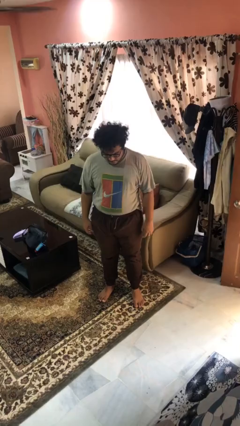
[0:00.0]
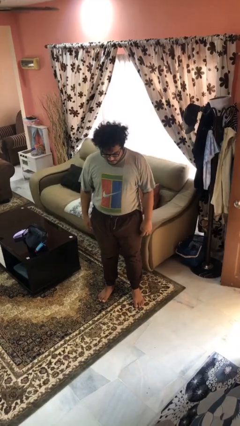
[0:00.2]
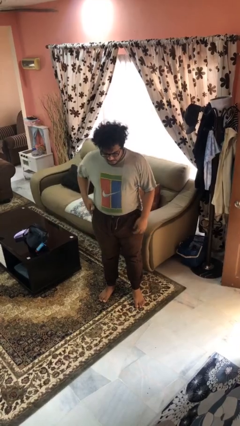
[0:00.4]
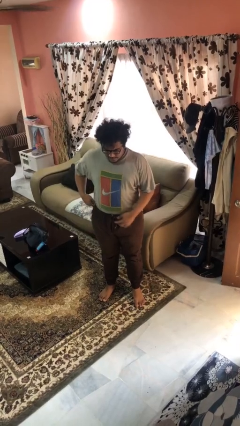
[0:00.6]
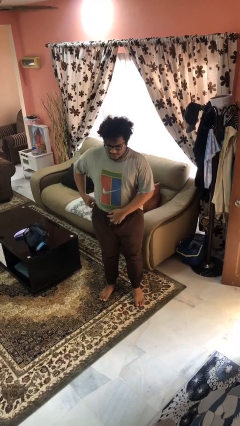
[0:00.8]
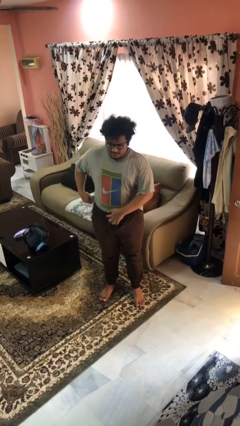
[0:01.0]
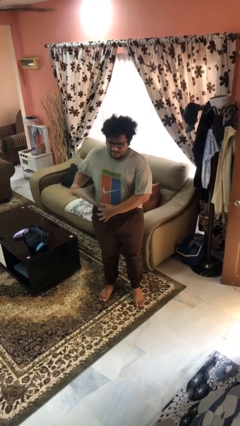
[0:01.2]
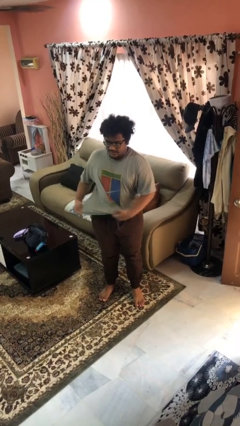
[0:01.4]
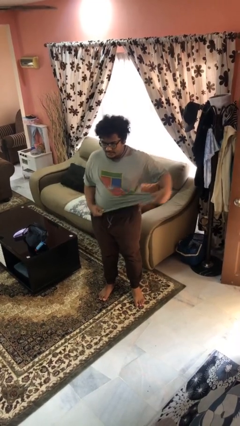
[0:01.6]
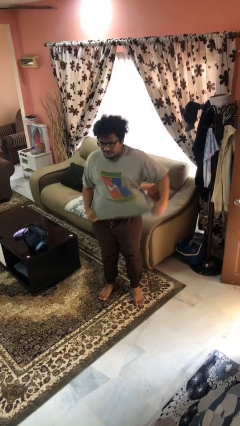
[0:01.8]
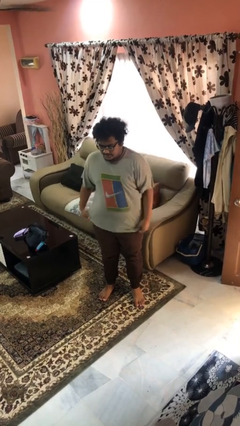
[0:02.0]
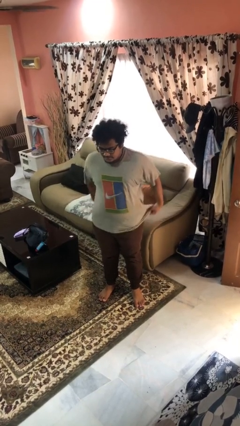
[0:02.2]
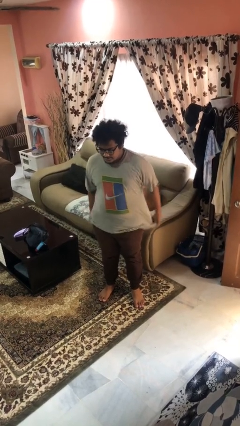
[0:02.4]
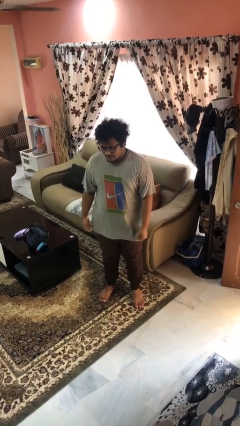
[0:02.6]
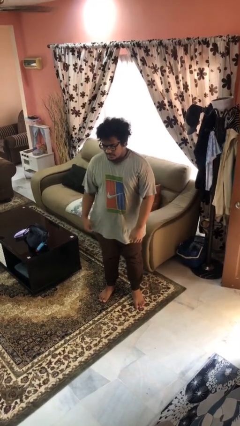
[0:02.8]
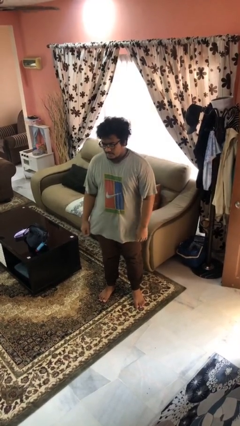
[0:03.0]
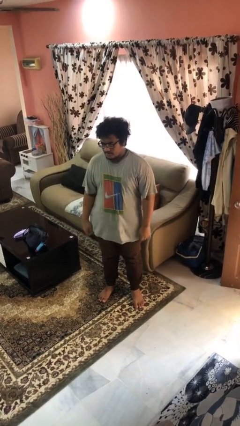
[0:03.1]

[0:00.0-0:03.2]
person untucks shirt

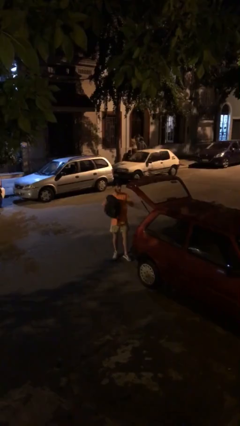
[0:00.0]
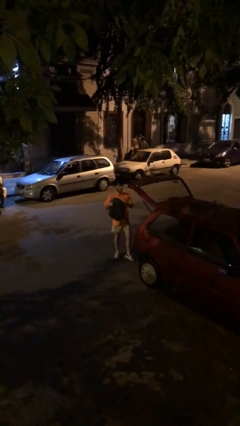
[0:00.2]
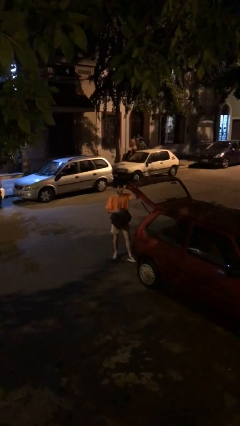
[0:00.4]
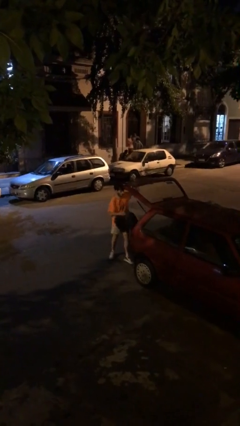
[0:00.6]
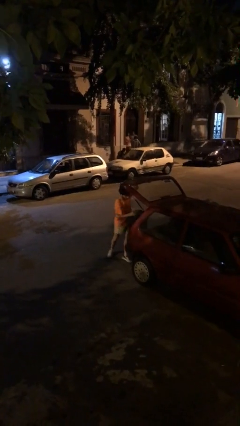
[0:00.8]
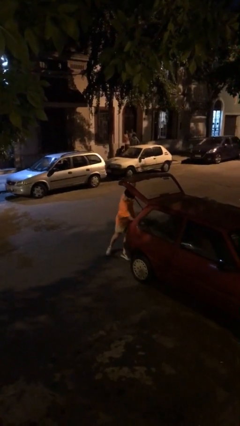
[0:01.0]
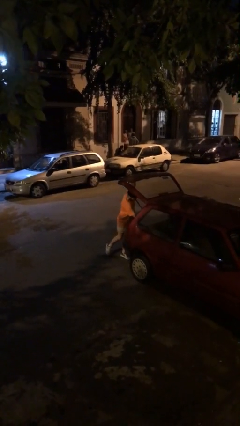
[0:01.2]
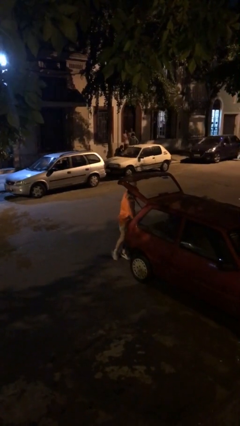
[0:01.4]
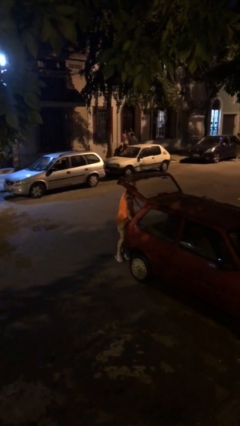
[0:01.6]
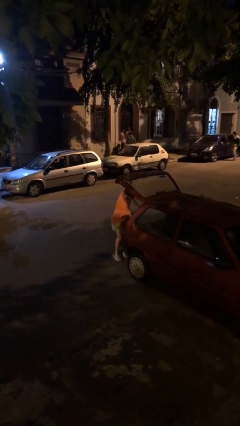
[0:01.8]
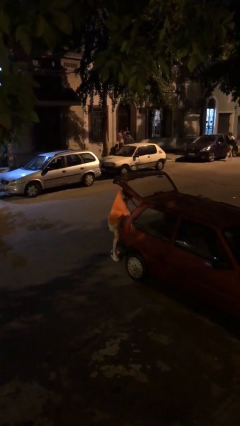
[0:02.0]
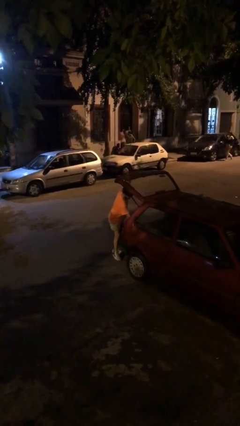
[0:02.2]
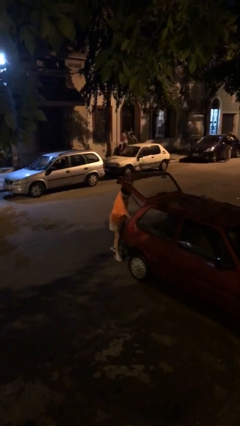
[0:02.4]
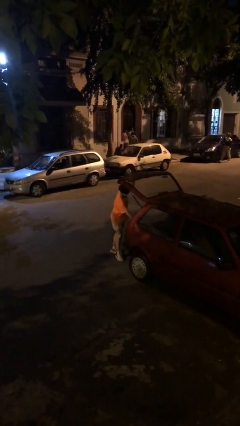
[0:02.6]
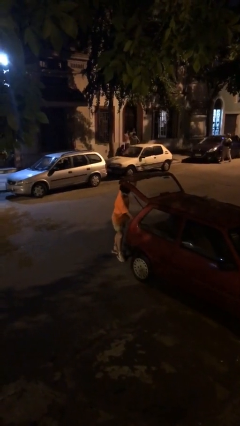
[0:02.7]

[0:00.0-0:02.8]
person loads car

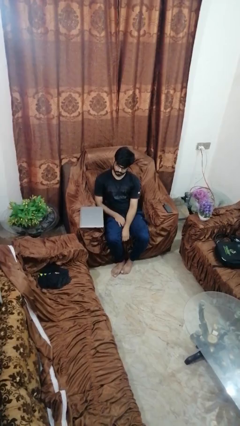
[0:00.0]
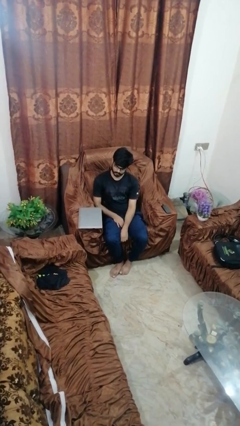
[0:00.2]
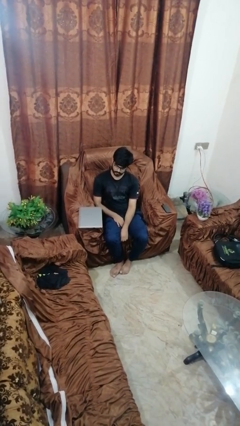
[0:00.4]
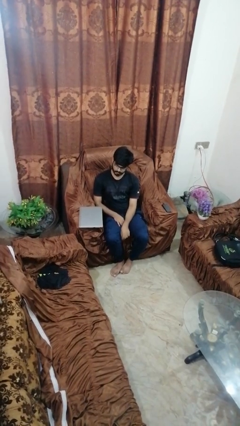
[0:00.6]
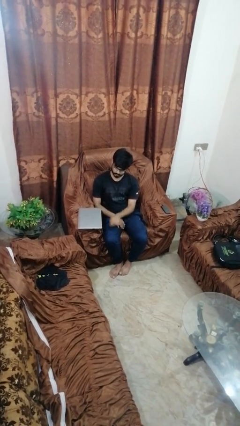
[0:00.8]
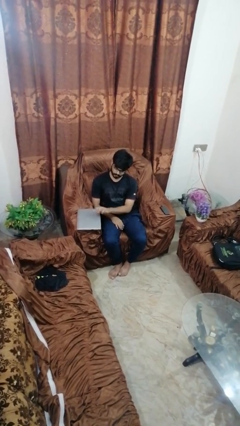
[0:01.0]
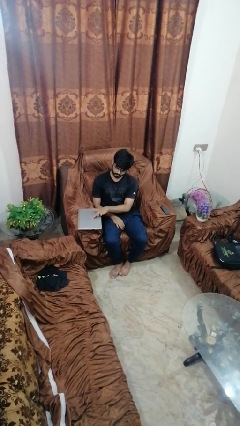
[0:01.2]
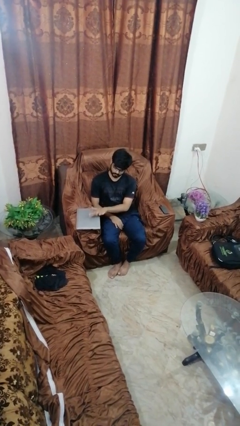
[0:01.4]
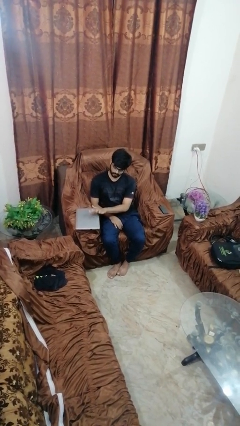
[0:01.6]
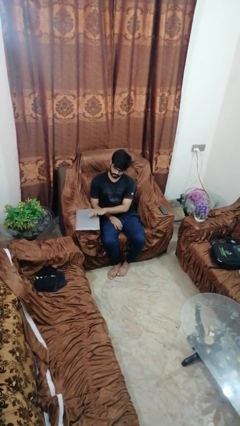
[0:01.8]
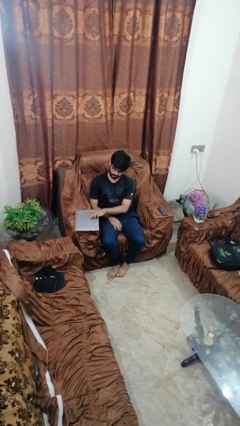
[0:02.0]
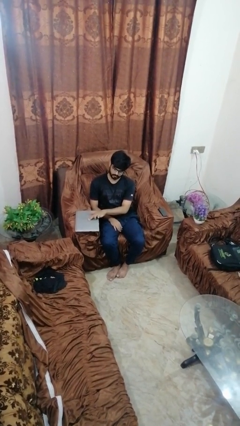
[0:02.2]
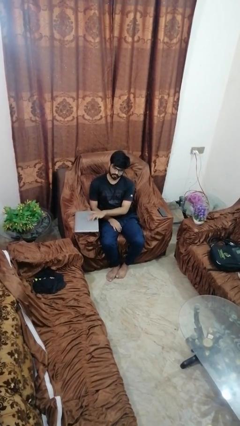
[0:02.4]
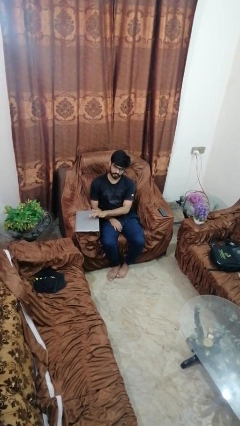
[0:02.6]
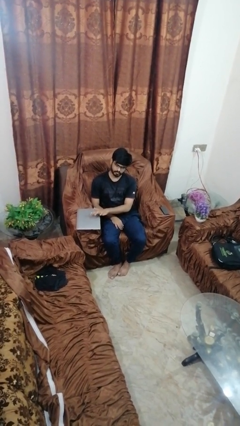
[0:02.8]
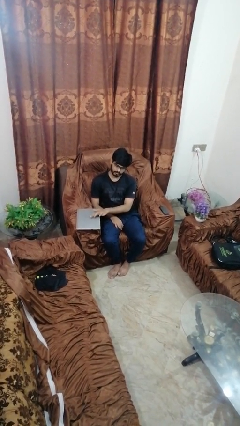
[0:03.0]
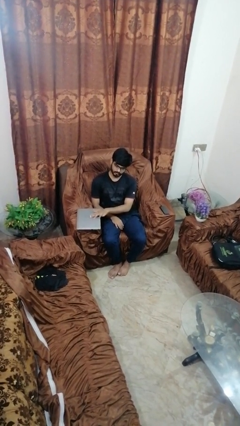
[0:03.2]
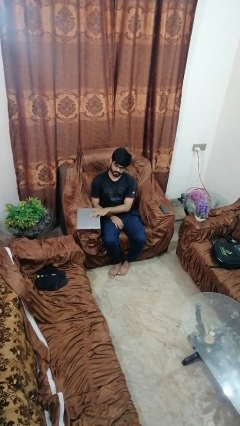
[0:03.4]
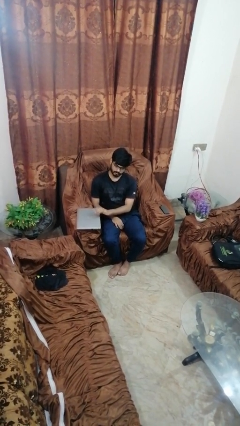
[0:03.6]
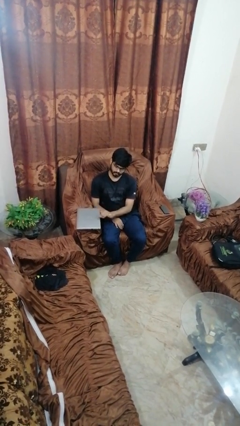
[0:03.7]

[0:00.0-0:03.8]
person taps object with finger

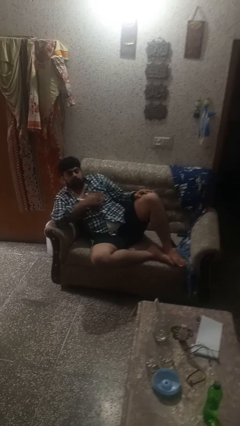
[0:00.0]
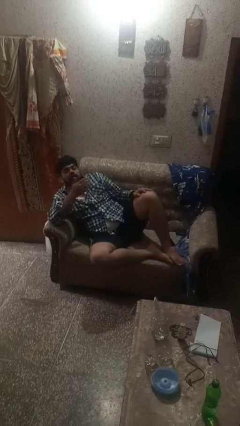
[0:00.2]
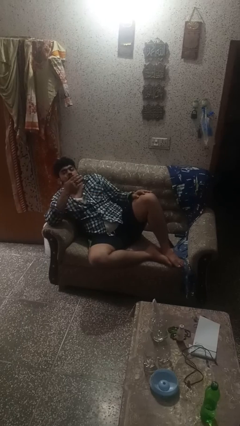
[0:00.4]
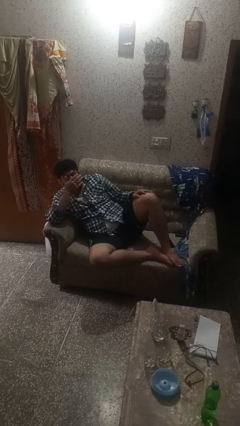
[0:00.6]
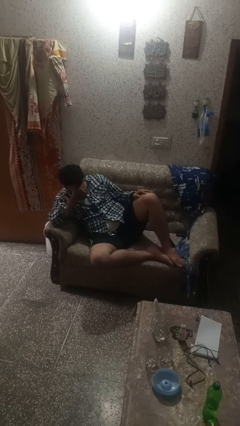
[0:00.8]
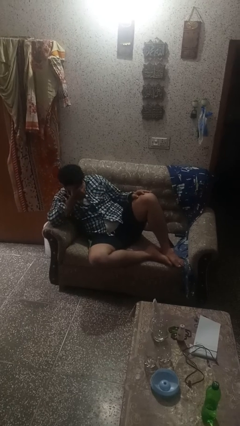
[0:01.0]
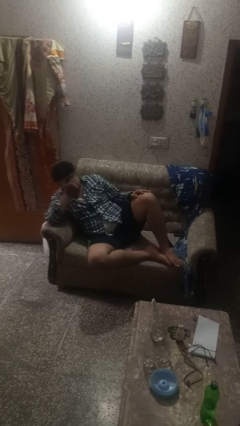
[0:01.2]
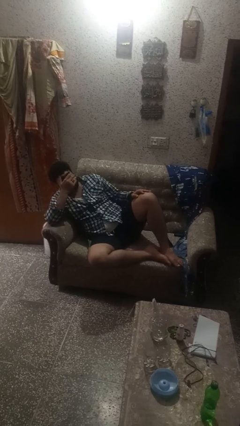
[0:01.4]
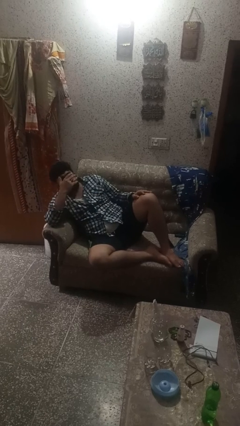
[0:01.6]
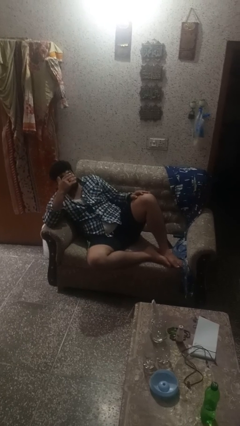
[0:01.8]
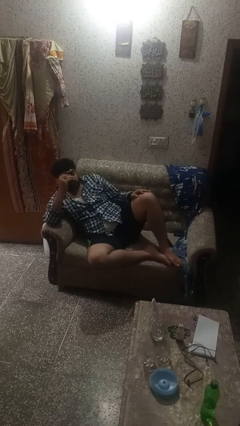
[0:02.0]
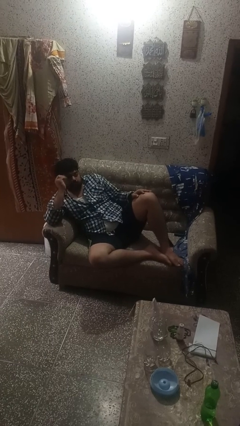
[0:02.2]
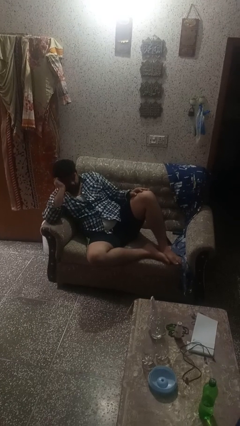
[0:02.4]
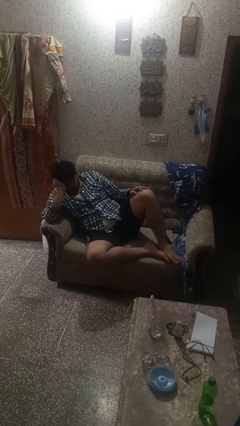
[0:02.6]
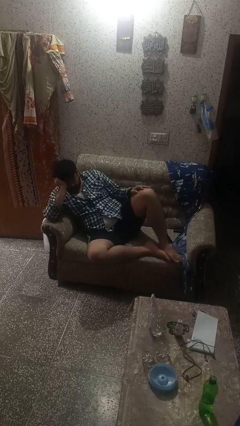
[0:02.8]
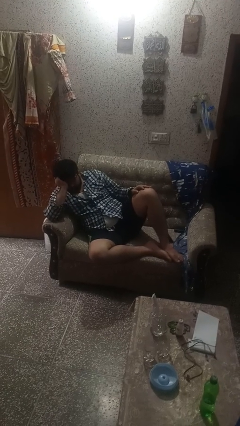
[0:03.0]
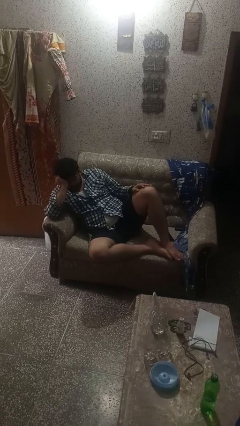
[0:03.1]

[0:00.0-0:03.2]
person sneezes into hand

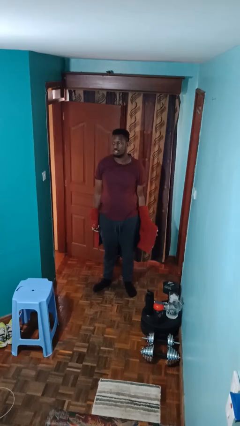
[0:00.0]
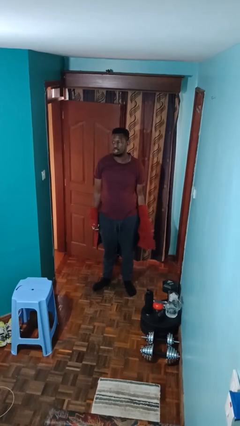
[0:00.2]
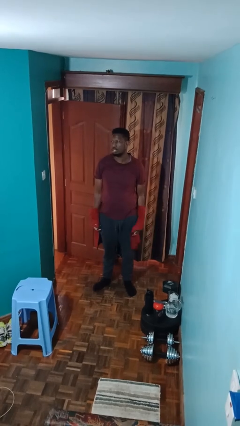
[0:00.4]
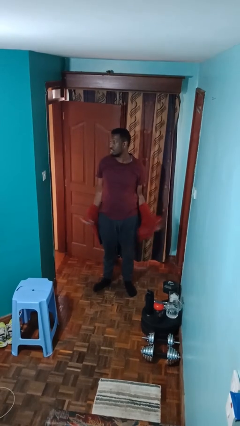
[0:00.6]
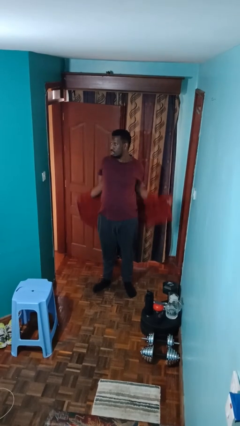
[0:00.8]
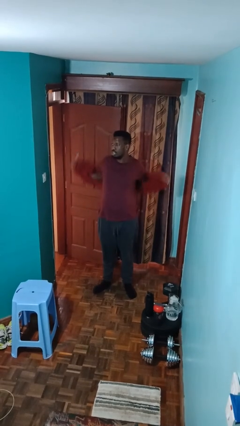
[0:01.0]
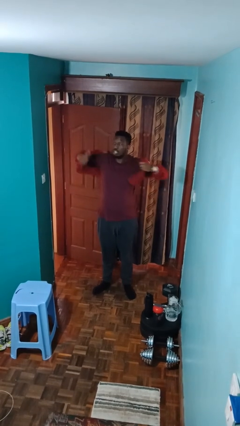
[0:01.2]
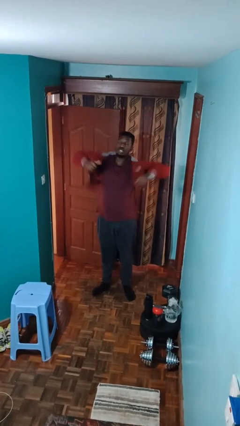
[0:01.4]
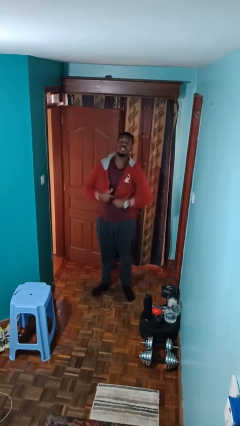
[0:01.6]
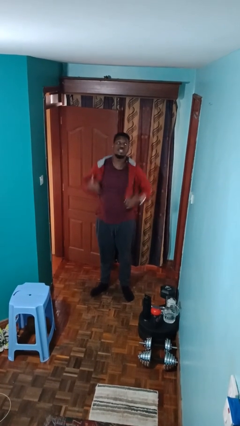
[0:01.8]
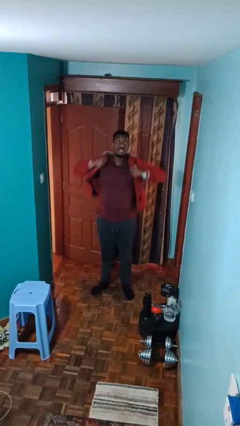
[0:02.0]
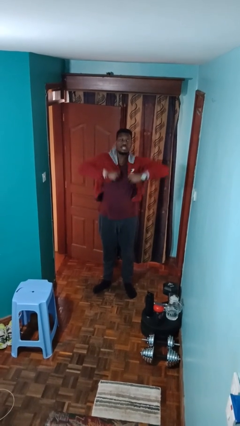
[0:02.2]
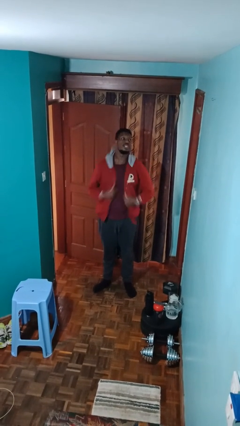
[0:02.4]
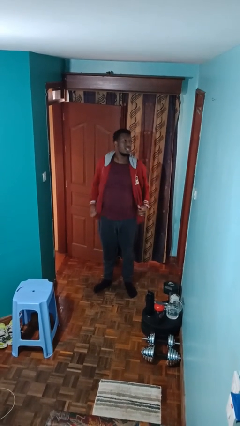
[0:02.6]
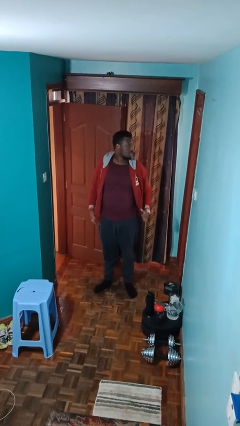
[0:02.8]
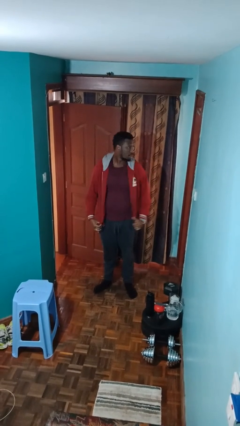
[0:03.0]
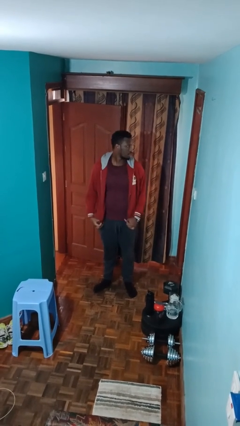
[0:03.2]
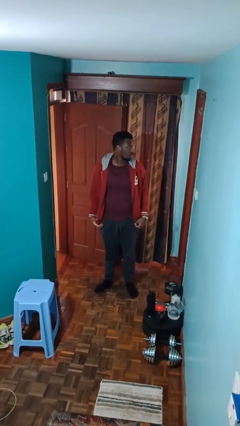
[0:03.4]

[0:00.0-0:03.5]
person puts on jacket

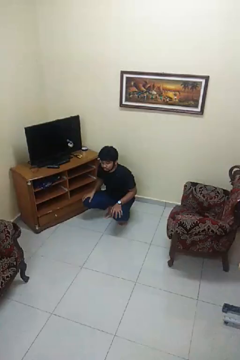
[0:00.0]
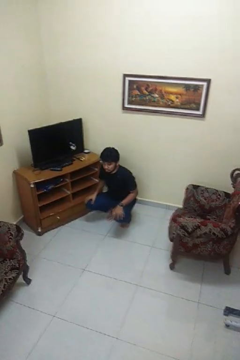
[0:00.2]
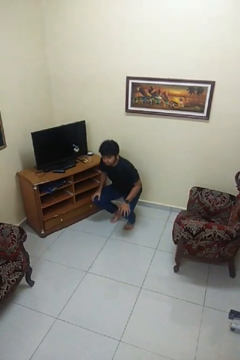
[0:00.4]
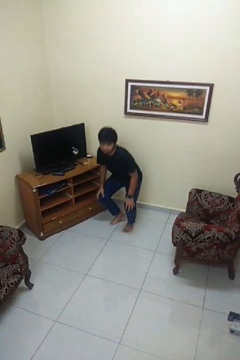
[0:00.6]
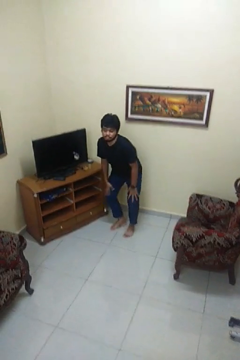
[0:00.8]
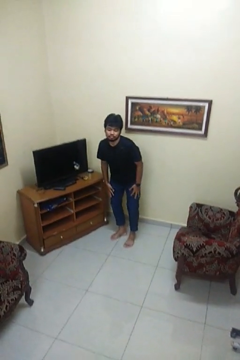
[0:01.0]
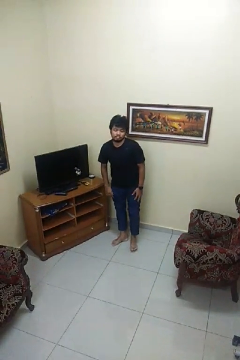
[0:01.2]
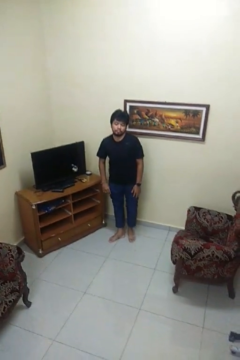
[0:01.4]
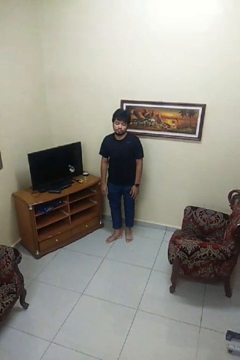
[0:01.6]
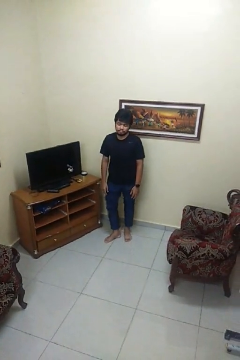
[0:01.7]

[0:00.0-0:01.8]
person stands up
